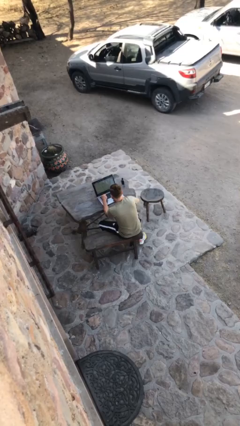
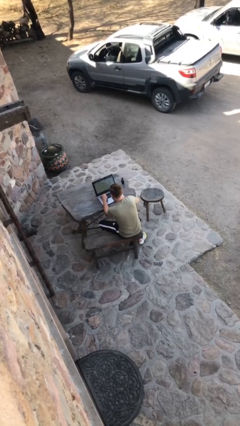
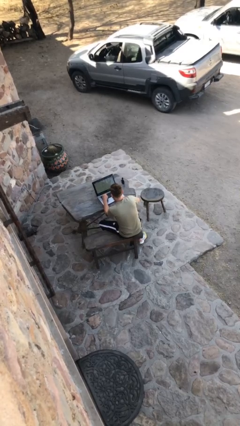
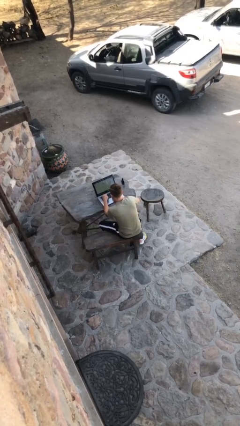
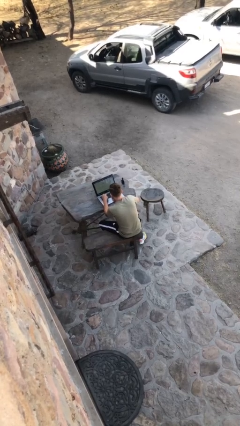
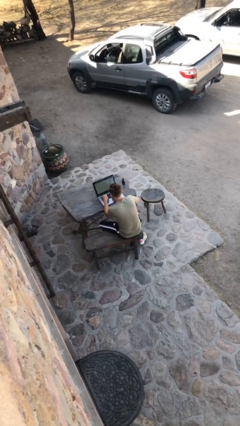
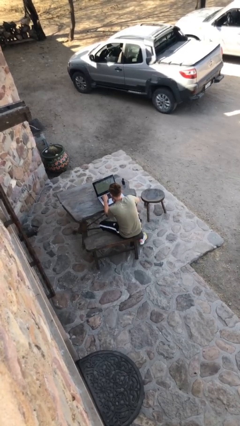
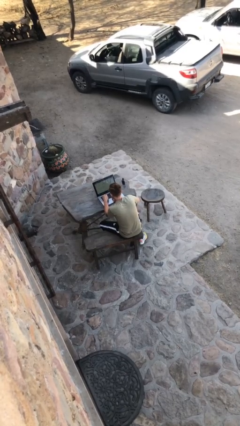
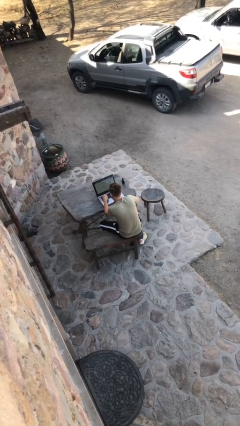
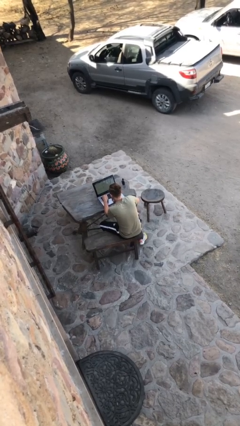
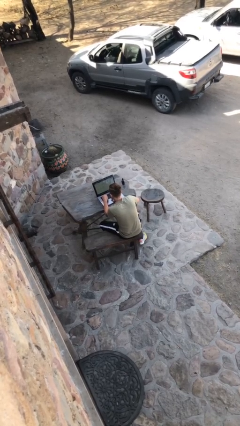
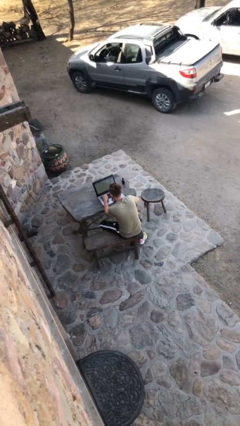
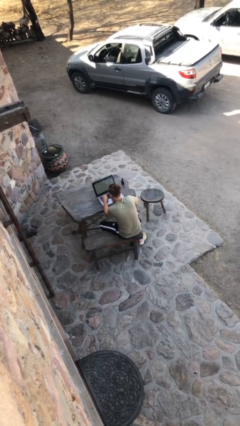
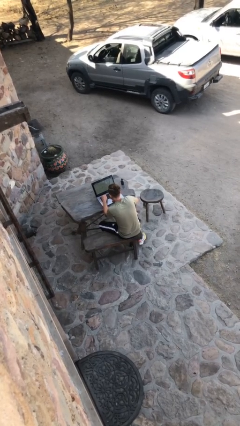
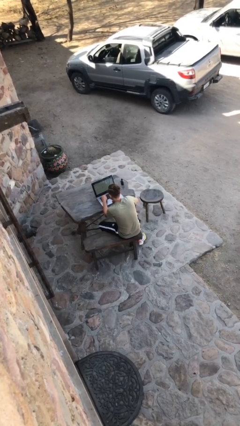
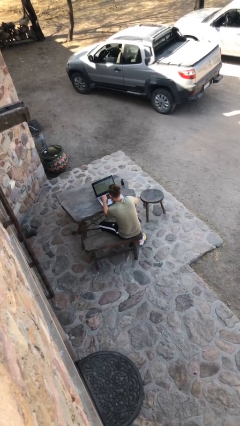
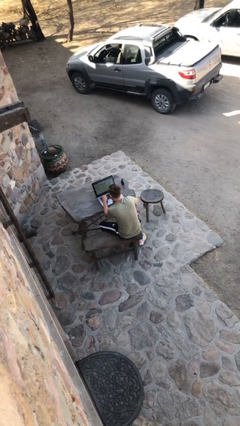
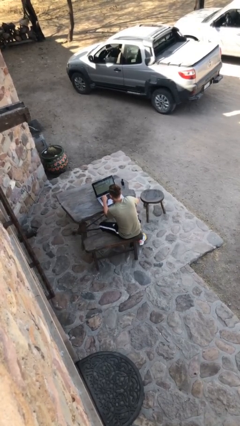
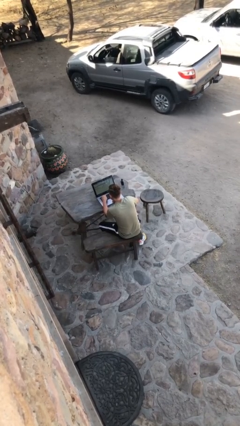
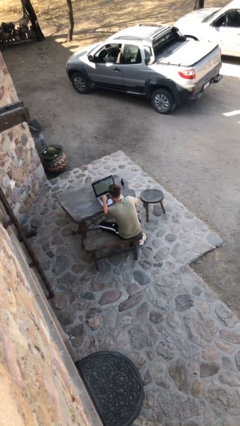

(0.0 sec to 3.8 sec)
person interacts with laptop

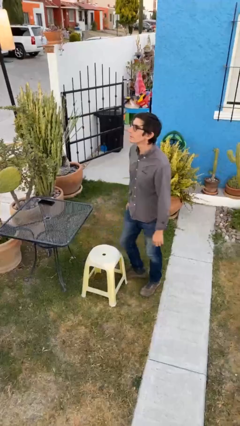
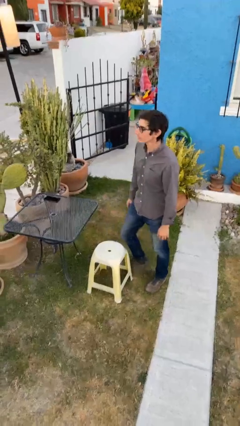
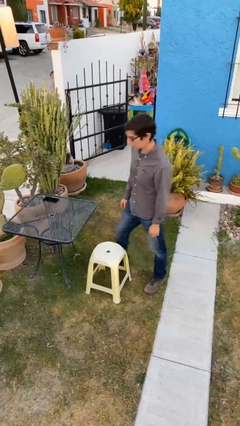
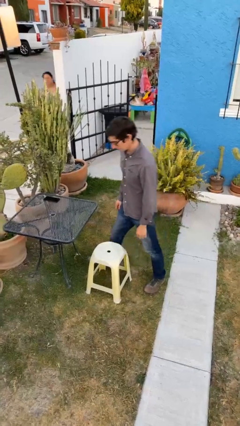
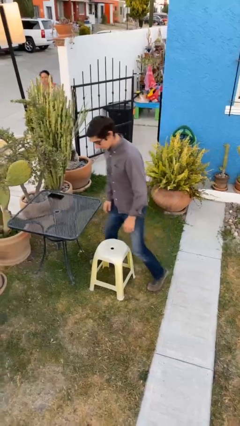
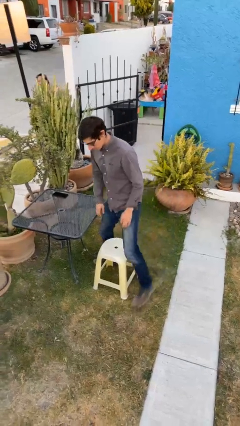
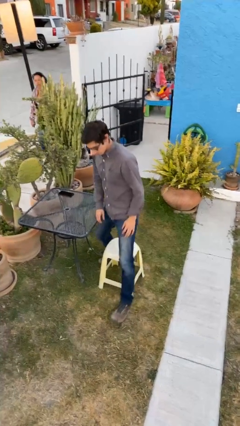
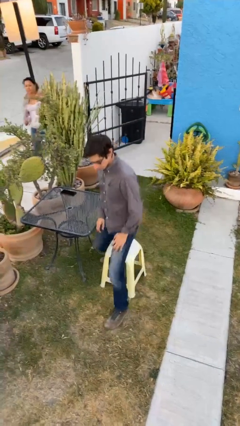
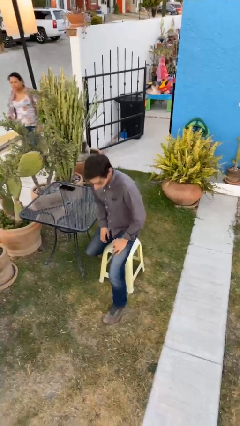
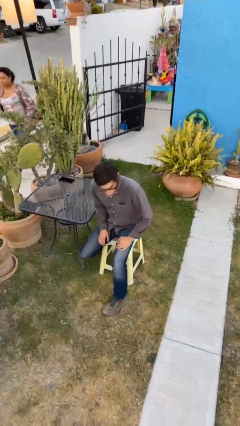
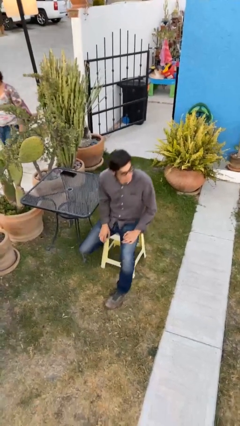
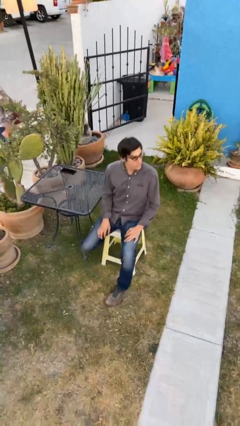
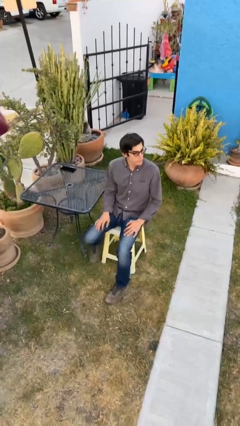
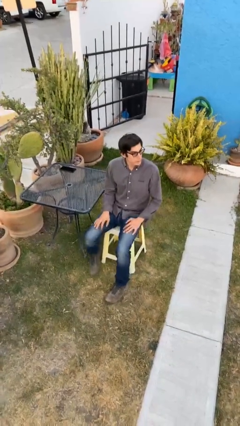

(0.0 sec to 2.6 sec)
person sits down

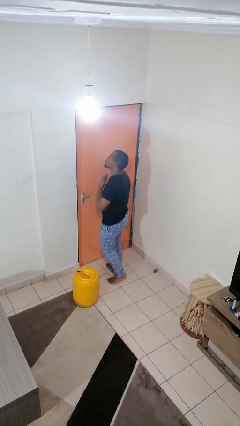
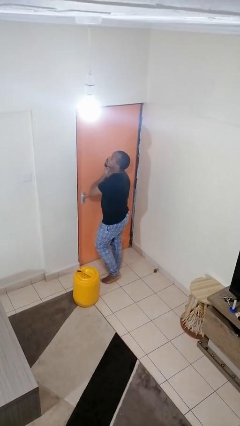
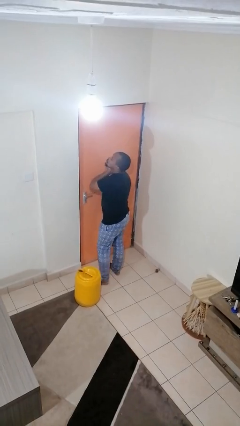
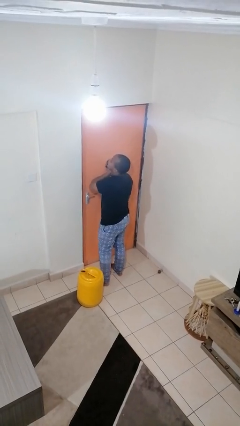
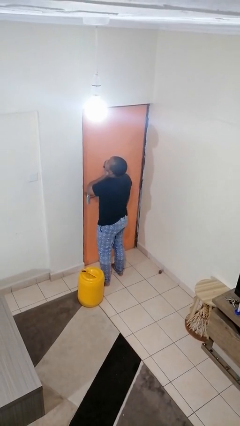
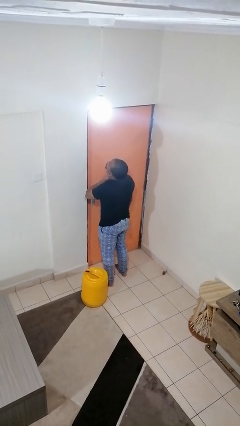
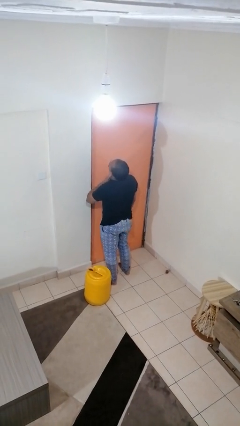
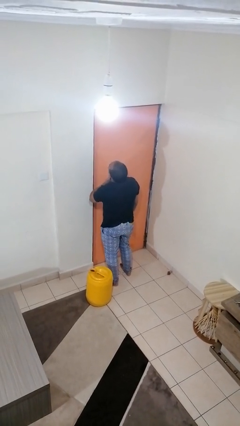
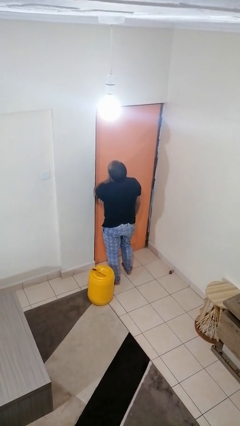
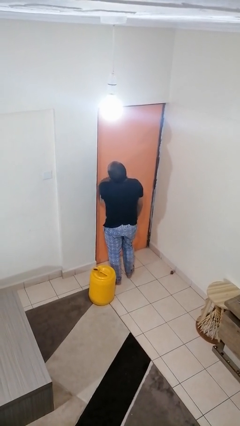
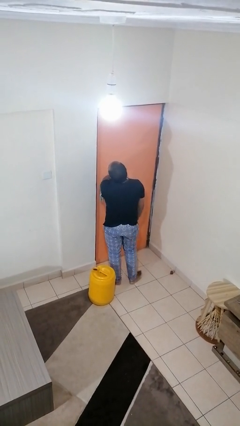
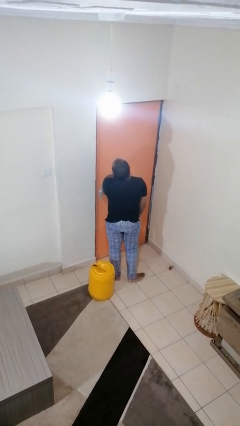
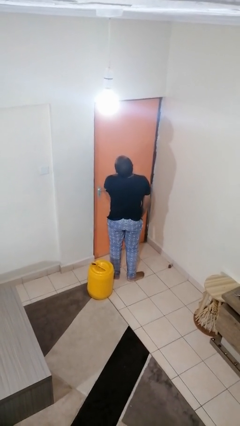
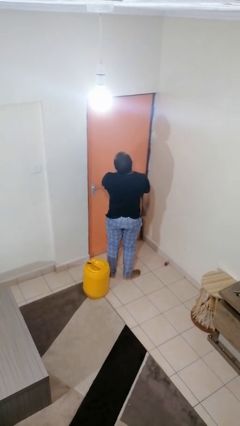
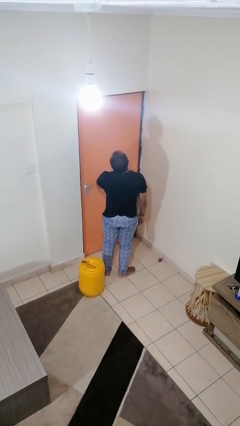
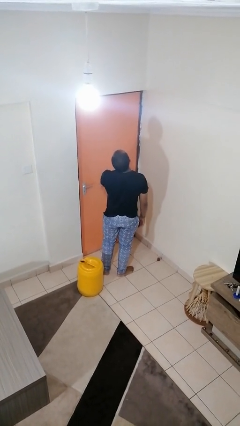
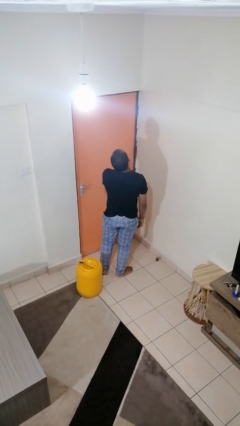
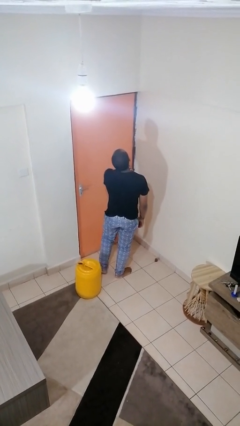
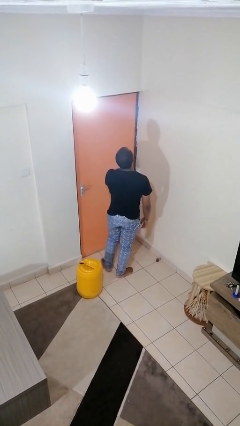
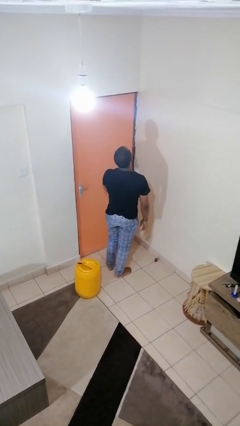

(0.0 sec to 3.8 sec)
person rubs neck

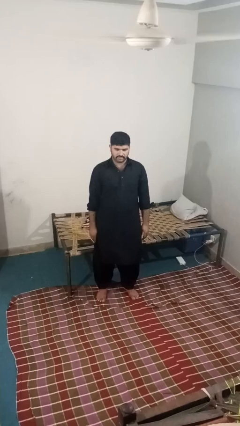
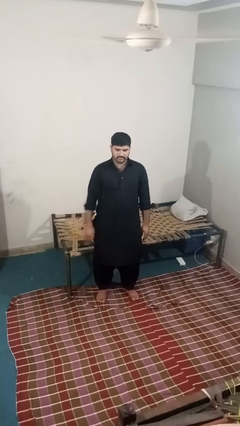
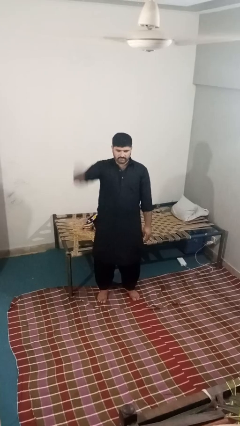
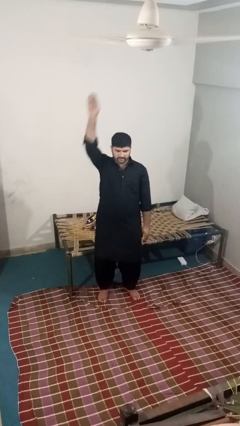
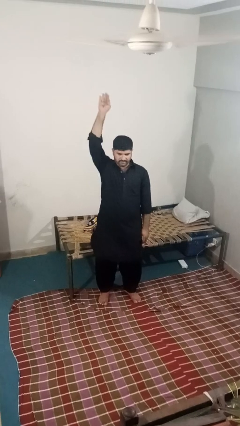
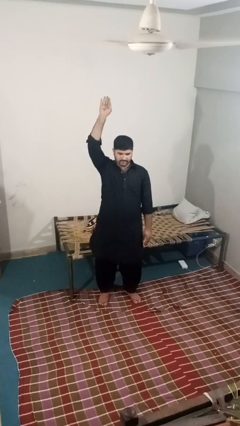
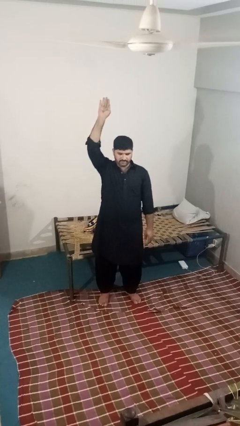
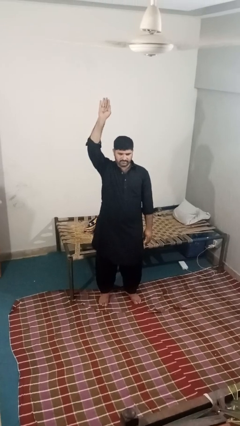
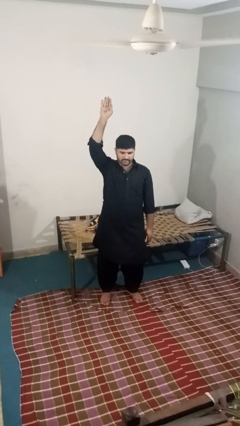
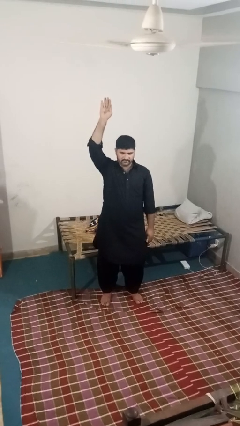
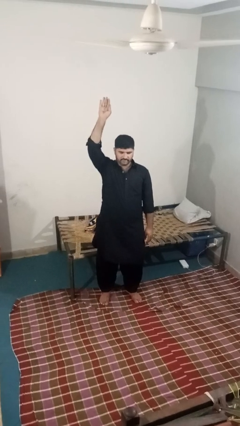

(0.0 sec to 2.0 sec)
person gestures raise hand

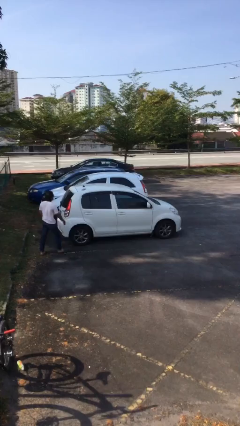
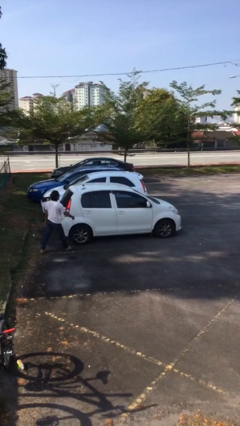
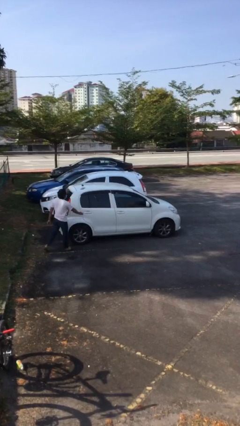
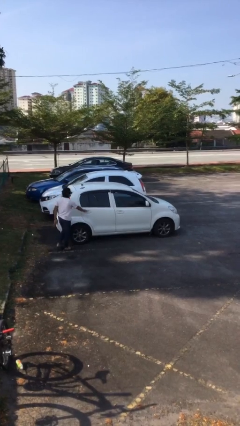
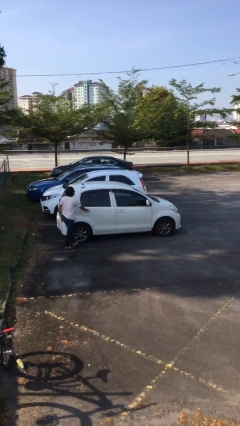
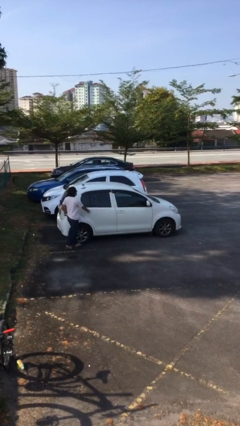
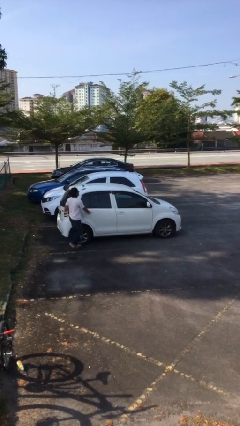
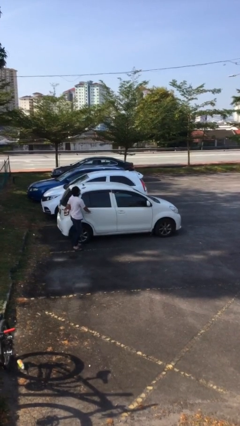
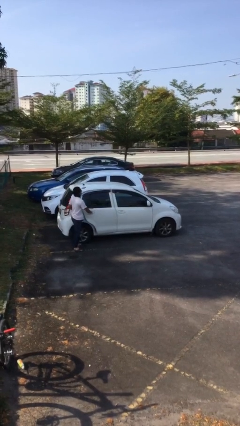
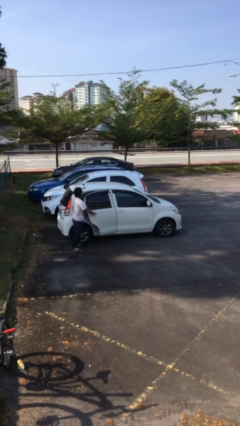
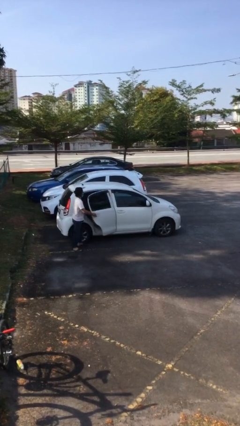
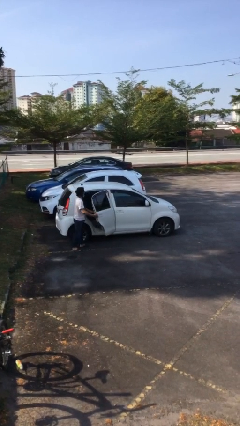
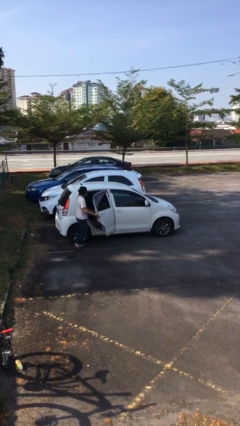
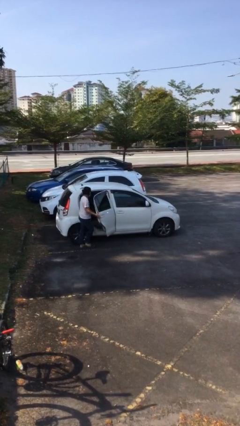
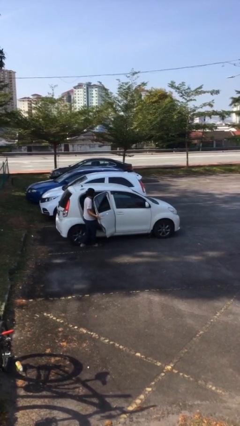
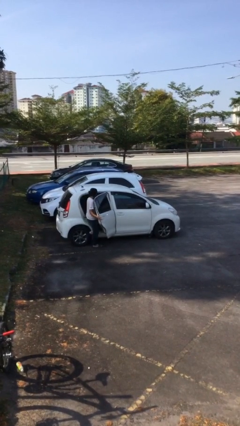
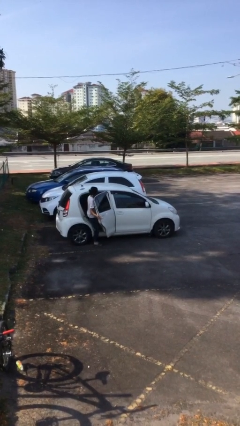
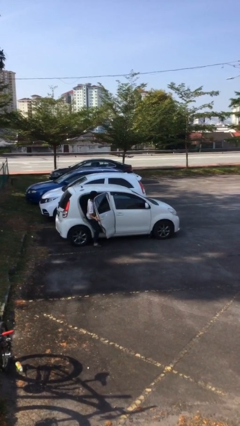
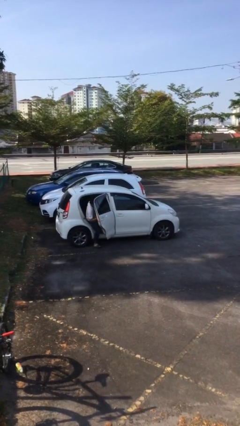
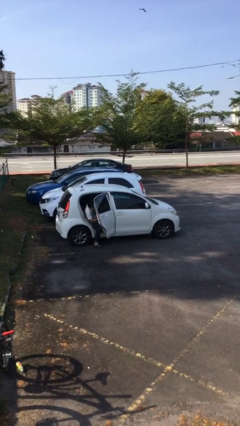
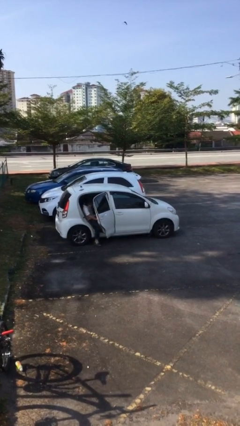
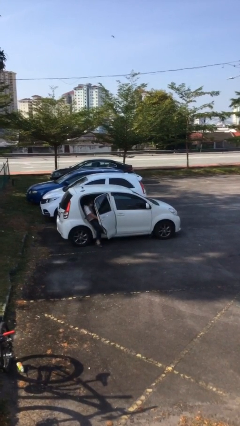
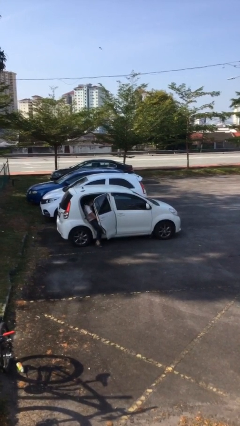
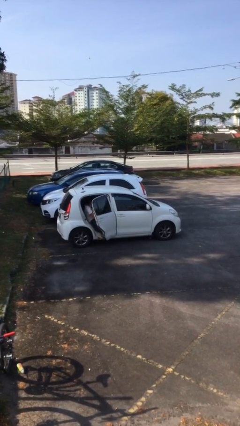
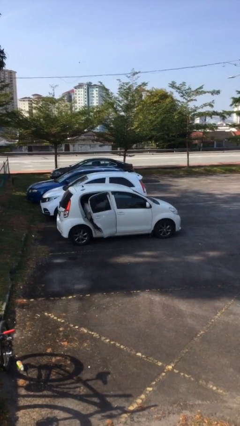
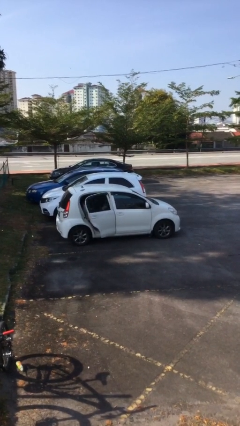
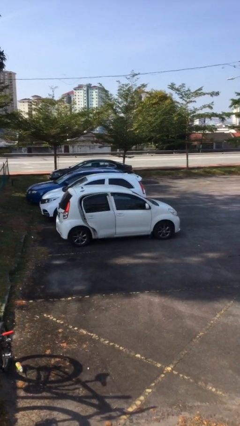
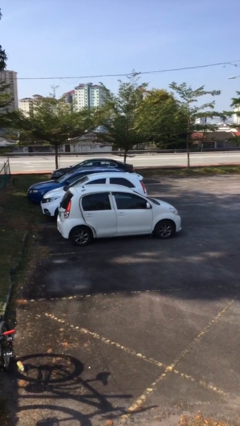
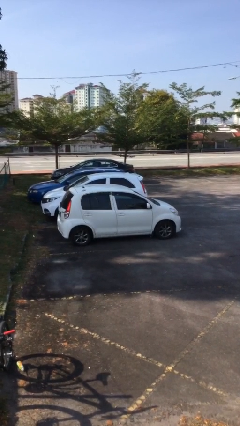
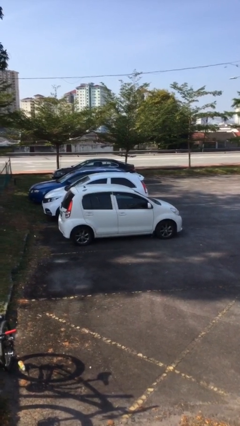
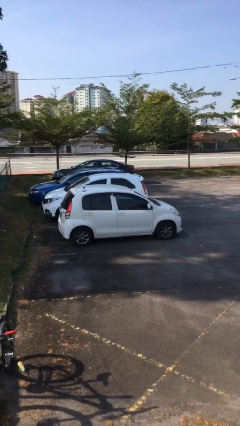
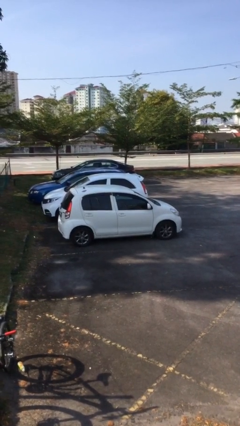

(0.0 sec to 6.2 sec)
car picks up person
